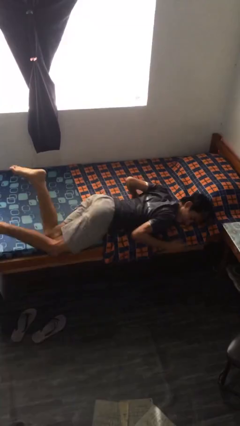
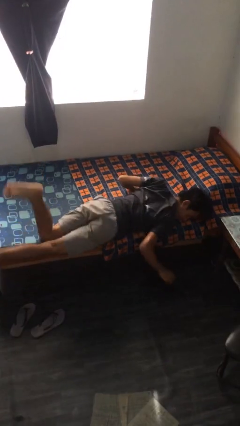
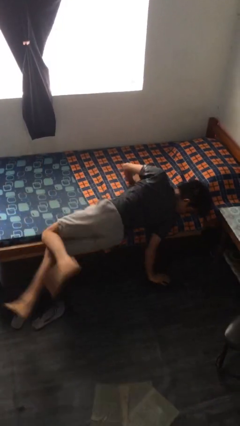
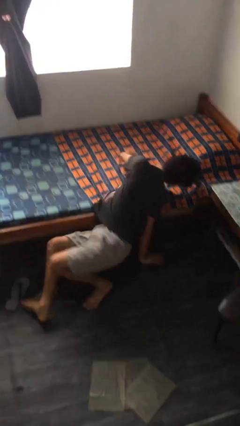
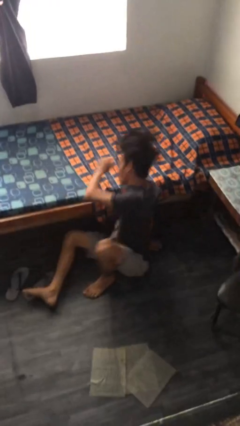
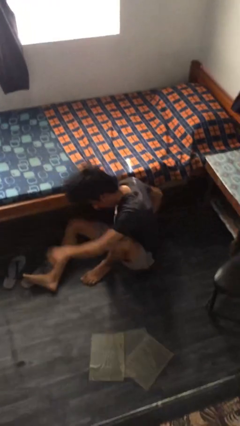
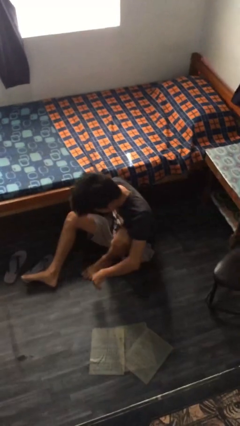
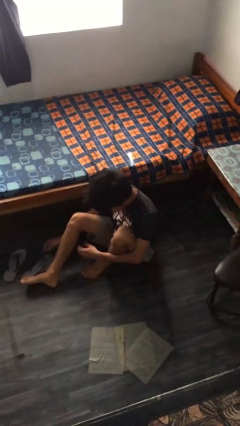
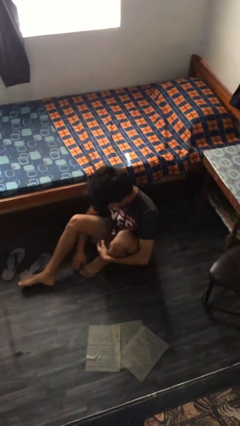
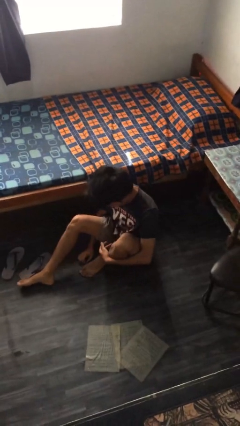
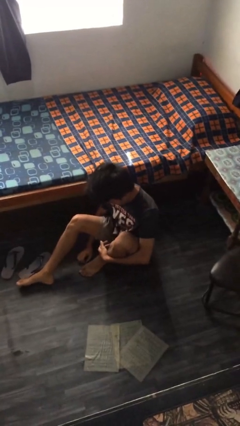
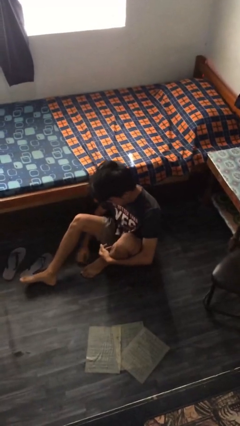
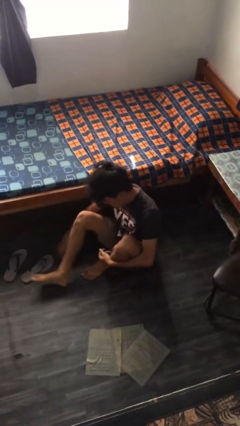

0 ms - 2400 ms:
person falls from bed

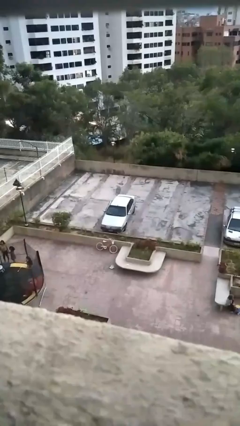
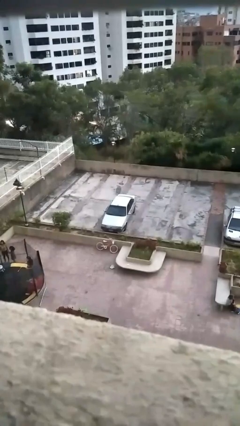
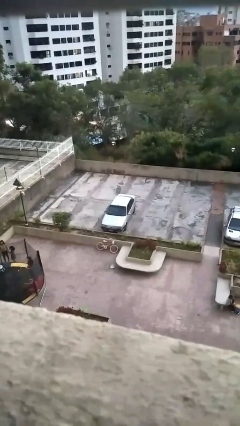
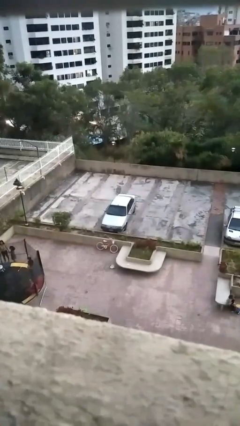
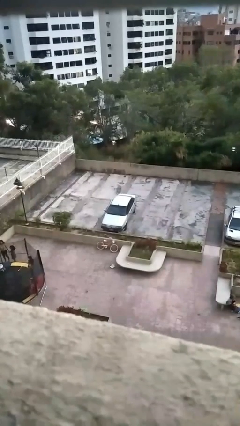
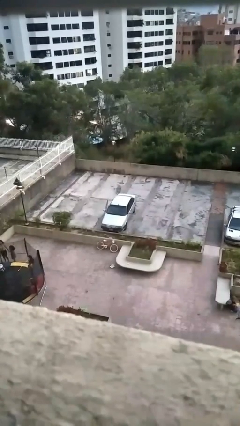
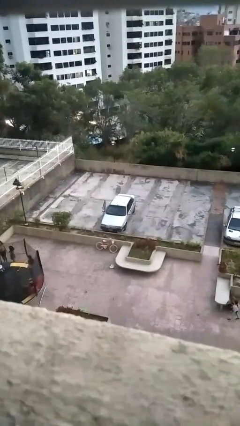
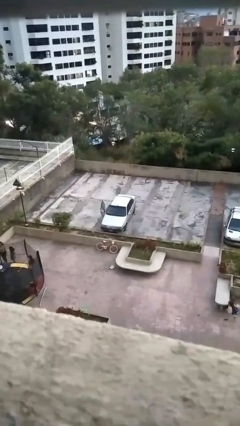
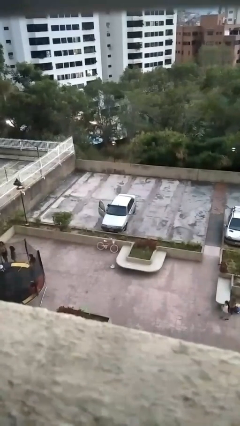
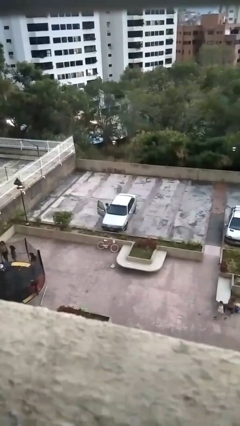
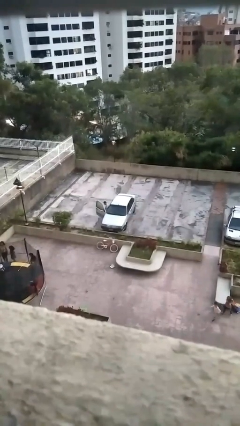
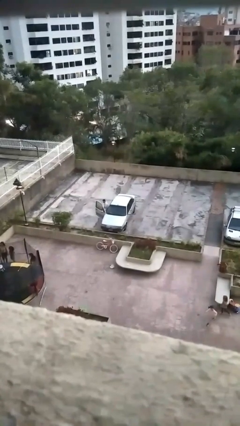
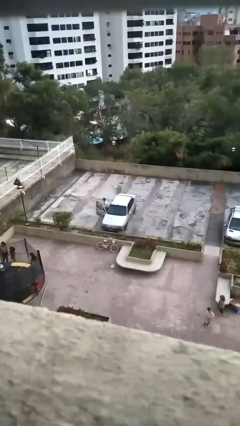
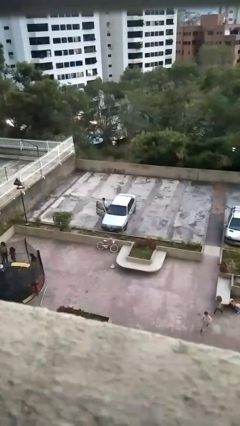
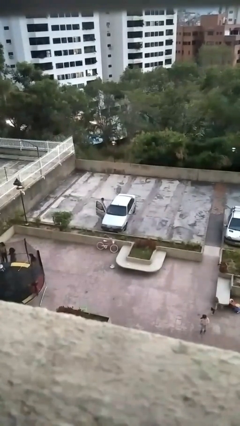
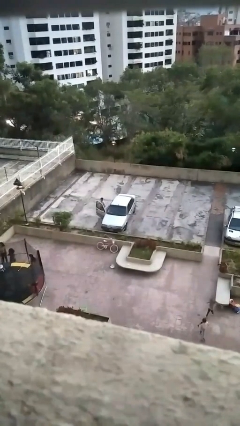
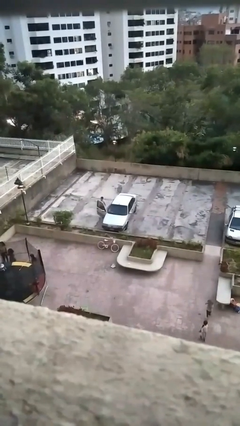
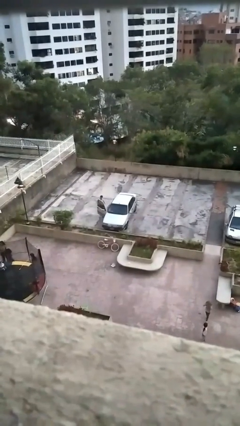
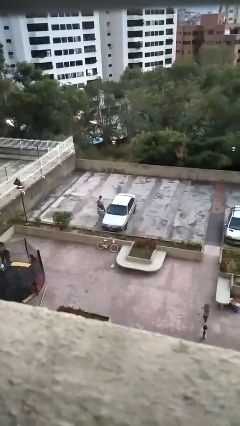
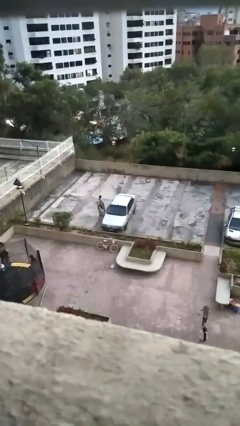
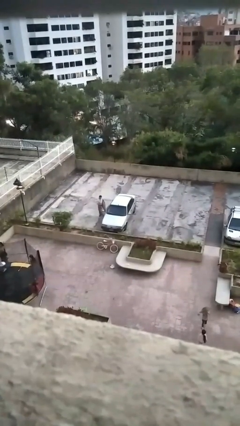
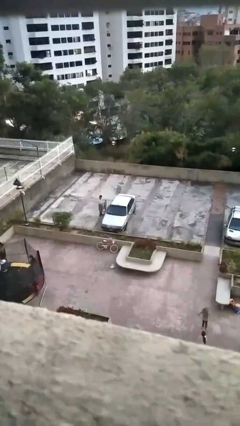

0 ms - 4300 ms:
car drops off person

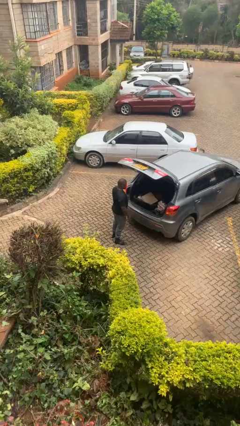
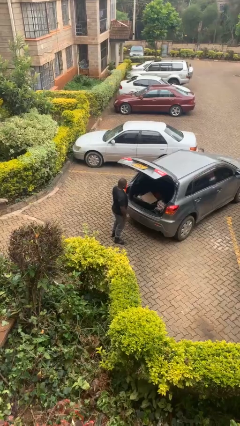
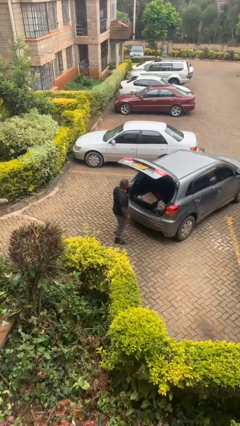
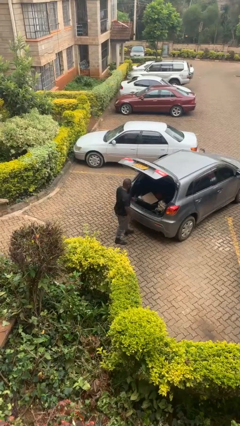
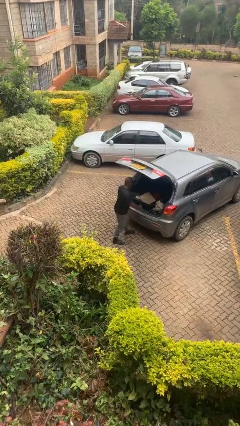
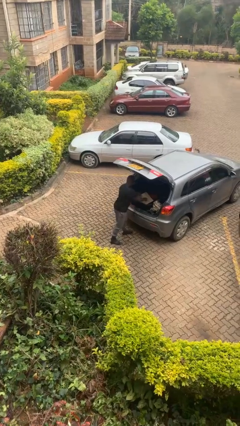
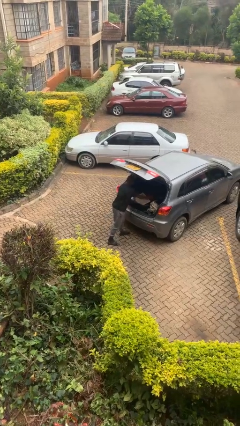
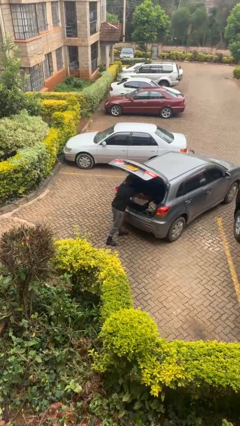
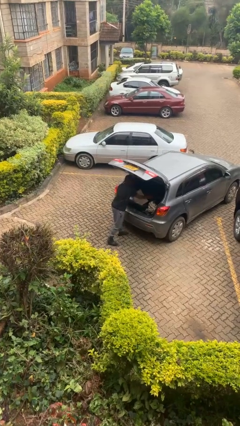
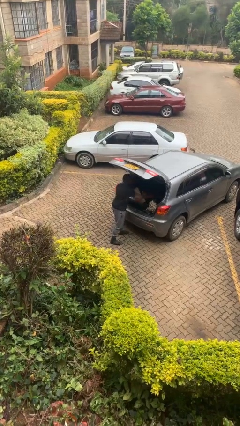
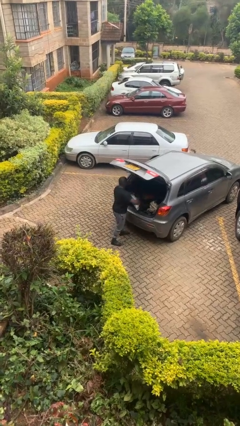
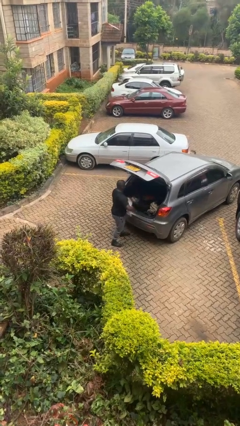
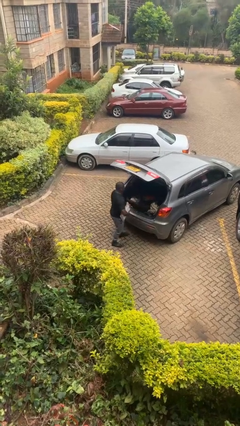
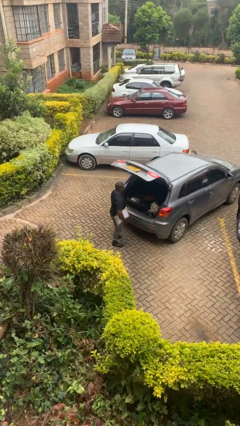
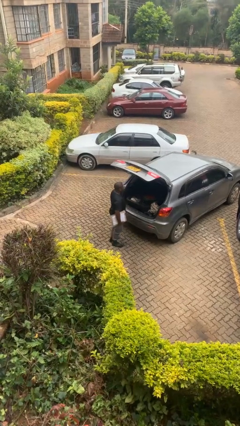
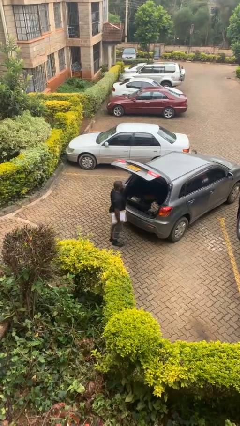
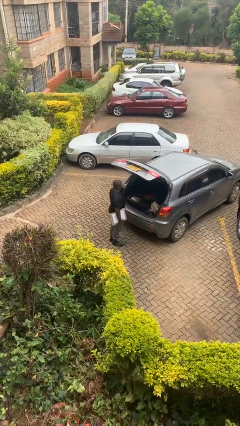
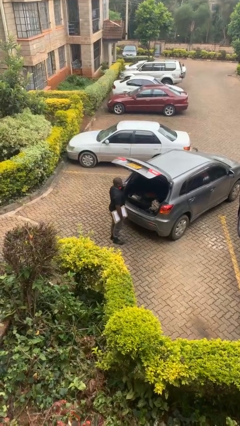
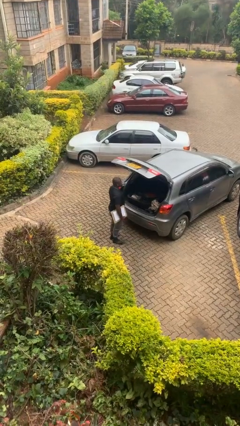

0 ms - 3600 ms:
person unloads car

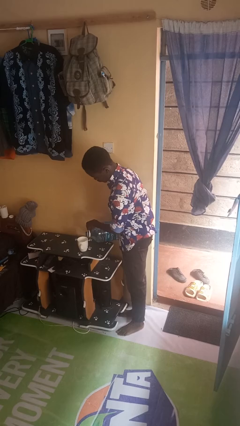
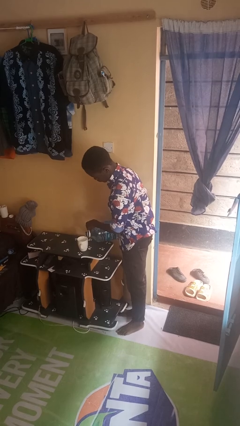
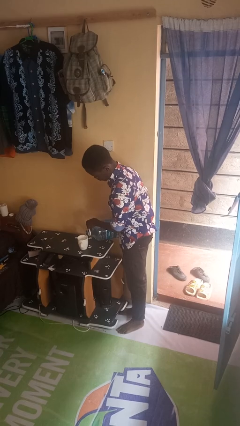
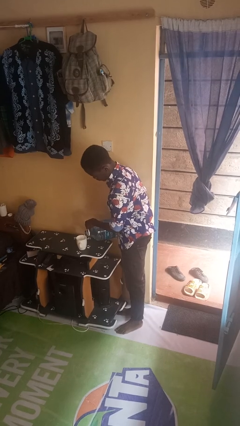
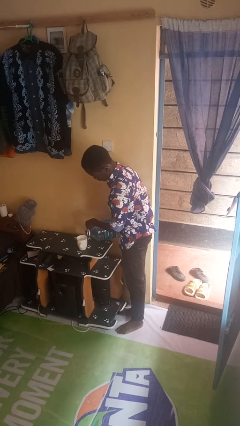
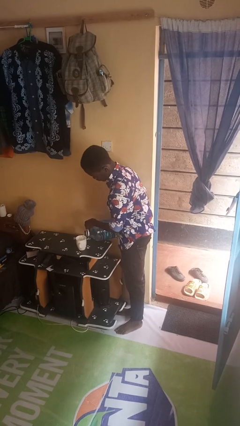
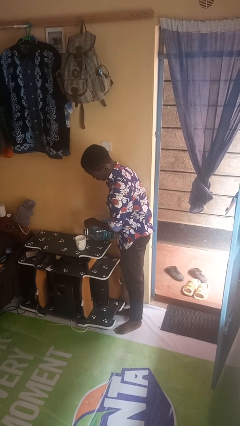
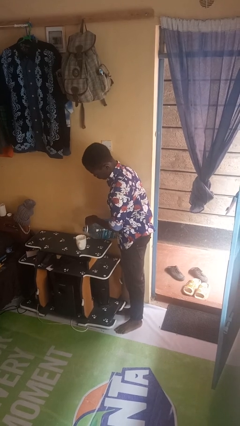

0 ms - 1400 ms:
person pours liquid into cup

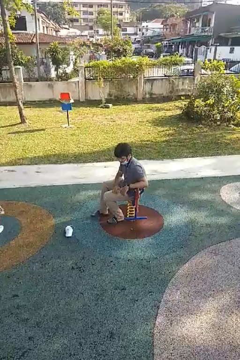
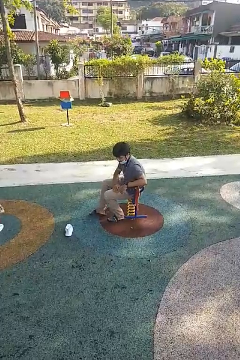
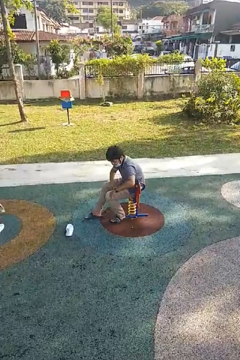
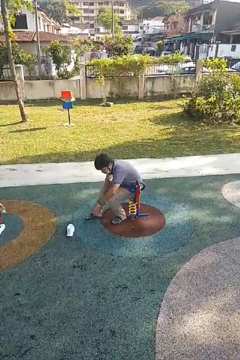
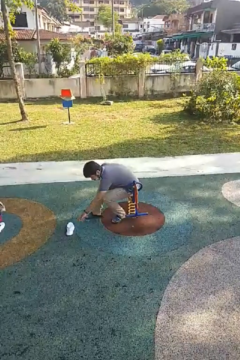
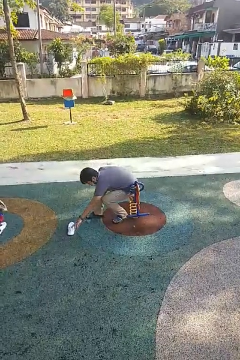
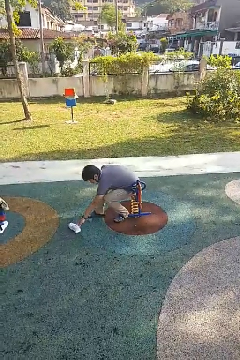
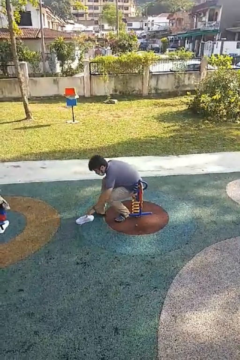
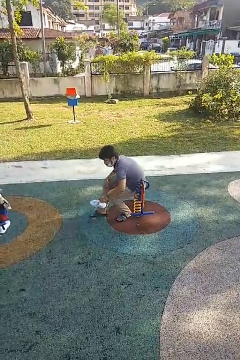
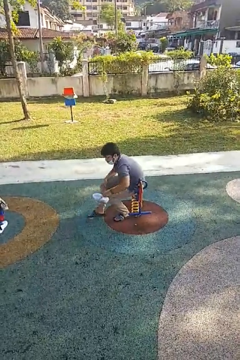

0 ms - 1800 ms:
person picks up object from floor

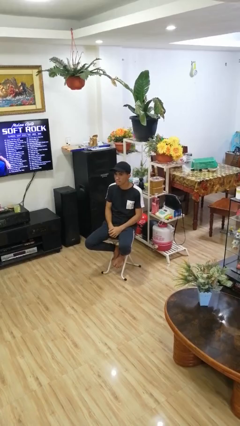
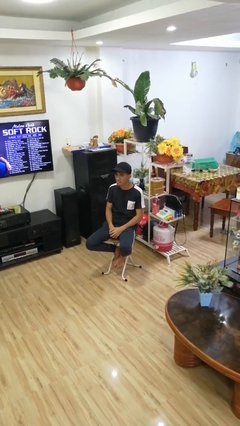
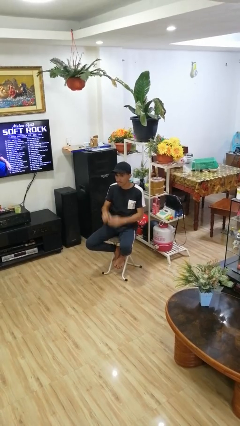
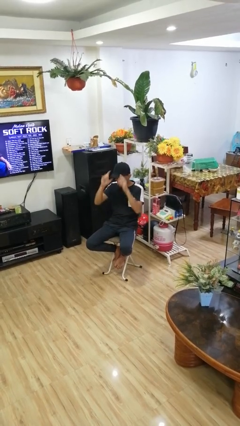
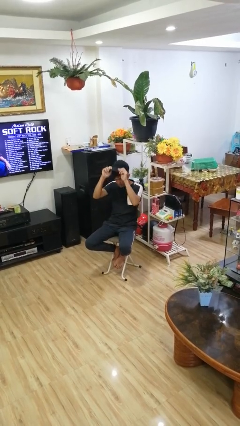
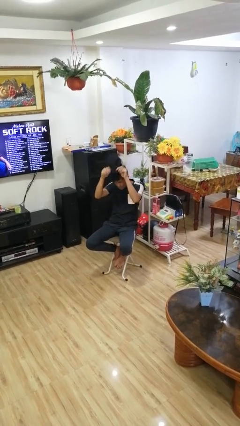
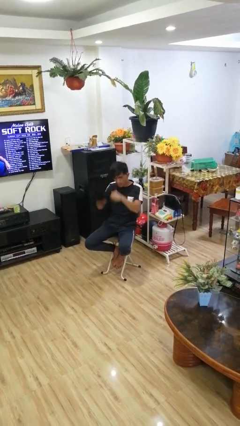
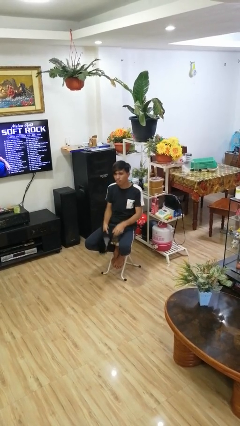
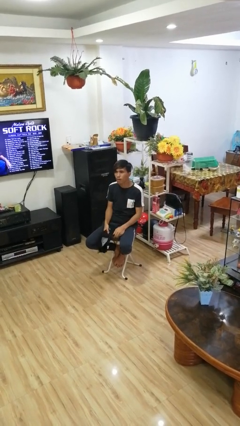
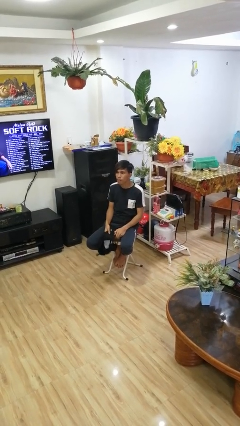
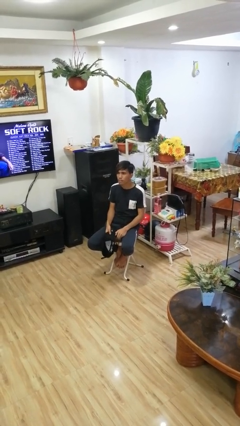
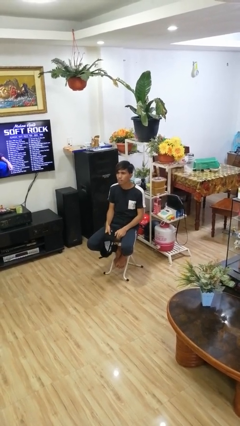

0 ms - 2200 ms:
person takes off hat

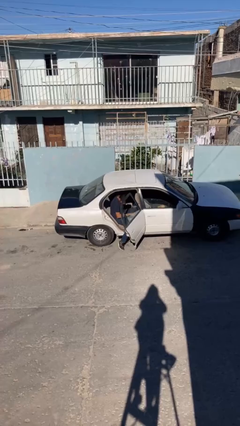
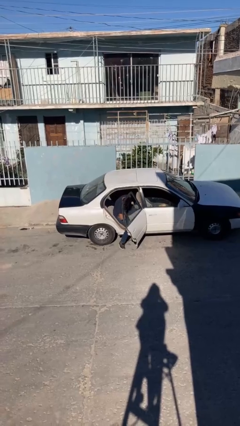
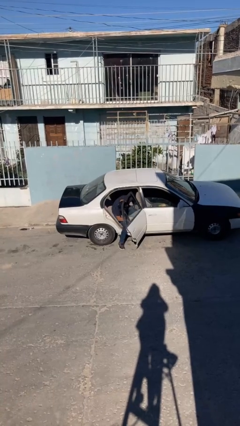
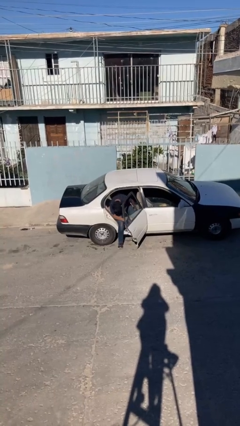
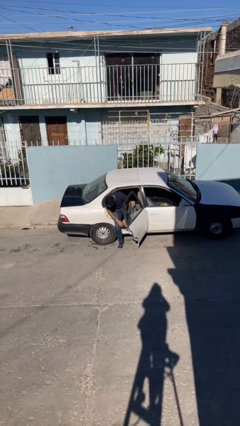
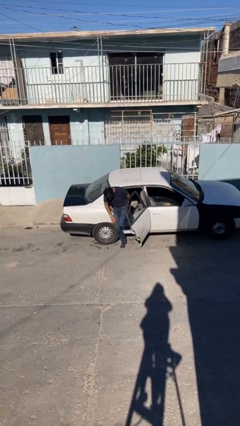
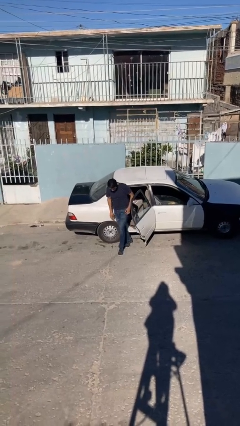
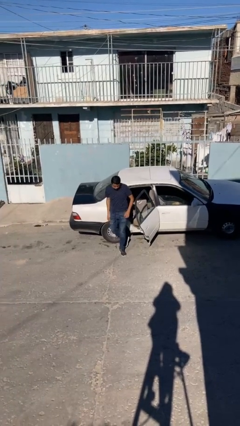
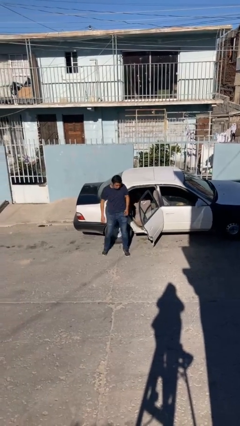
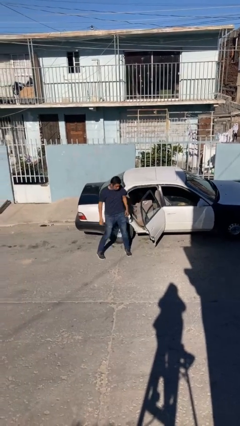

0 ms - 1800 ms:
person exits car

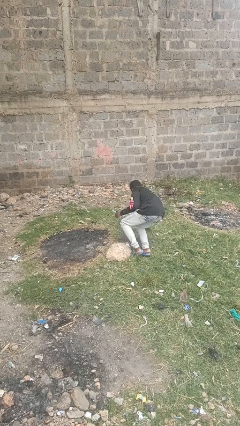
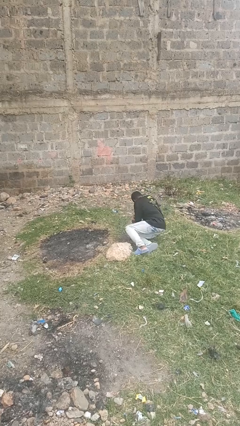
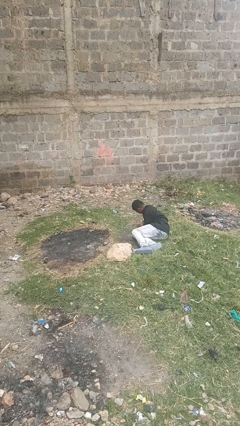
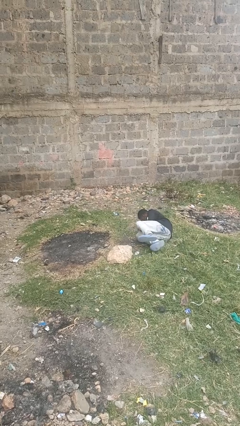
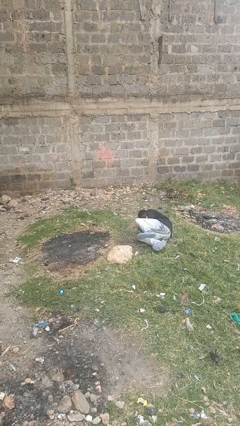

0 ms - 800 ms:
person trips on object on floor
